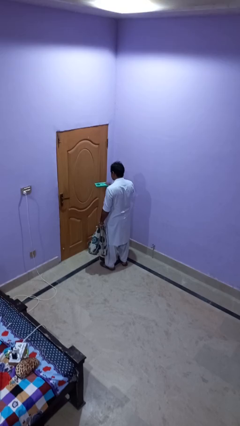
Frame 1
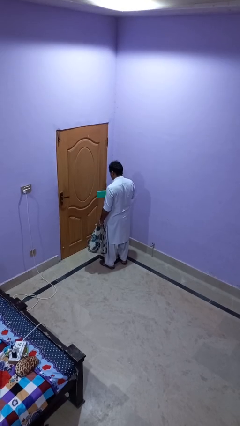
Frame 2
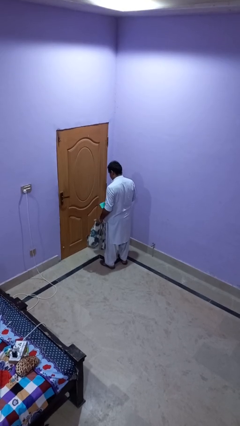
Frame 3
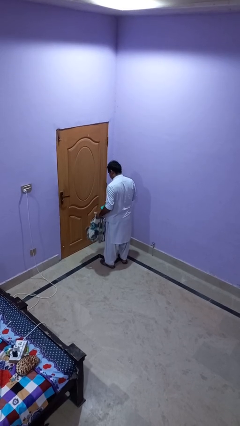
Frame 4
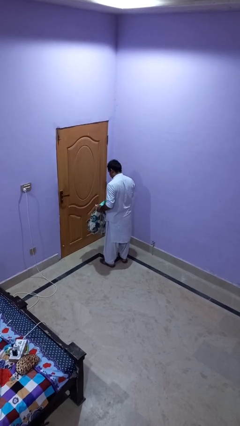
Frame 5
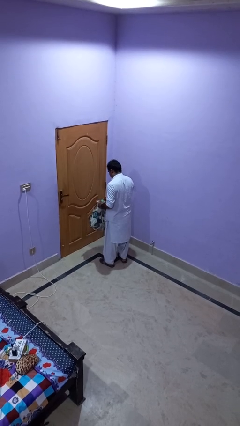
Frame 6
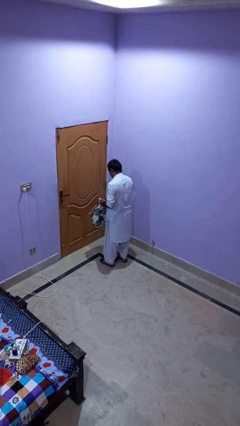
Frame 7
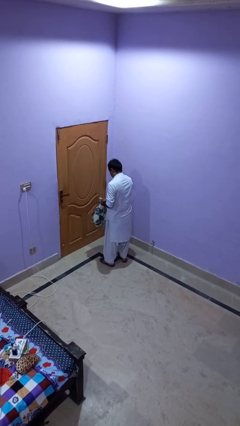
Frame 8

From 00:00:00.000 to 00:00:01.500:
person puts object into backpack

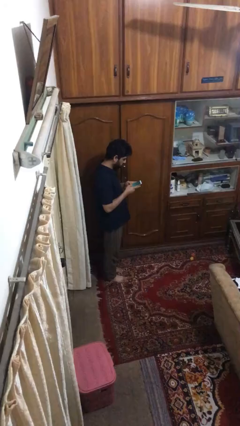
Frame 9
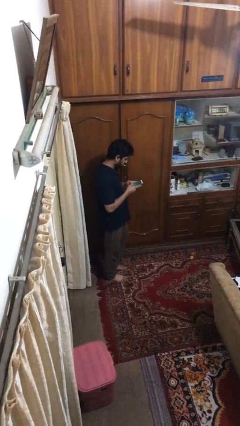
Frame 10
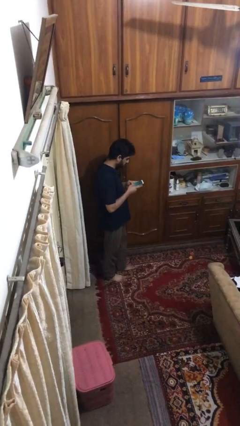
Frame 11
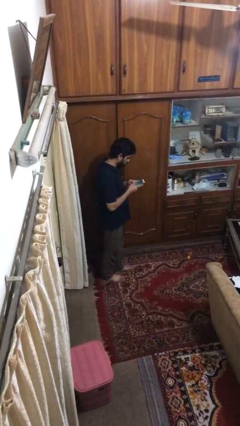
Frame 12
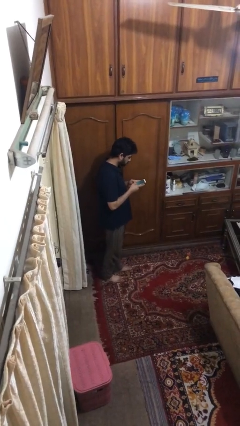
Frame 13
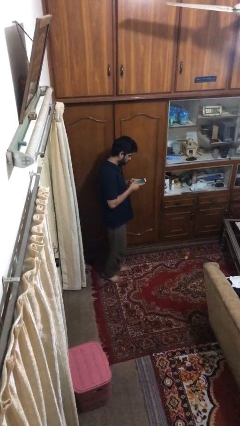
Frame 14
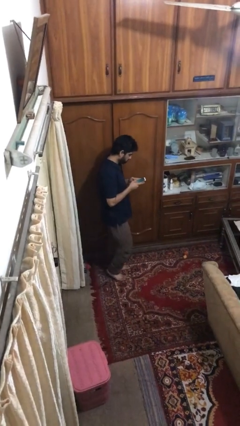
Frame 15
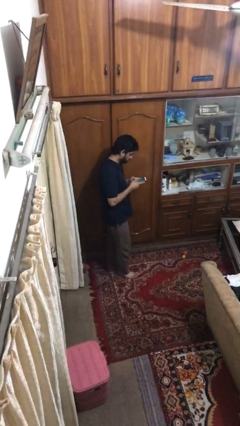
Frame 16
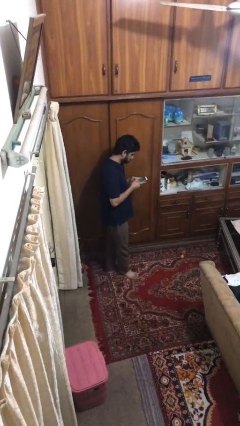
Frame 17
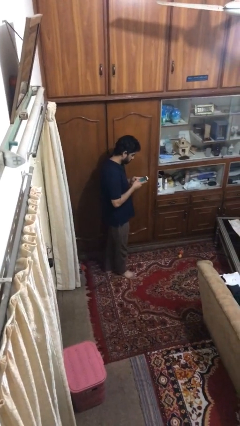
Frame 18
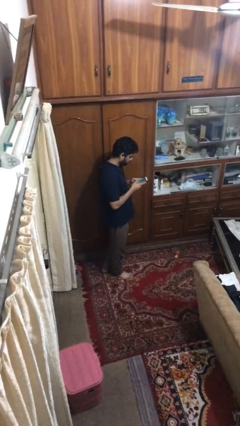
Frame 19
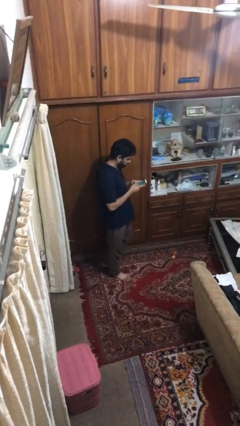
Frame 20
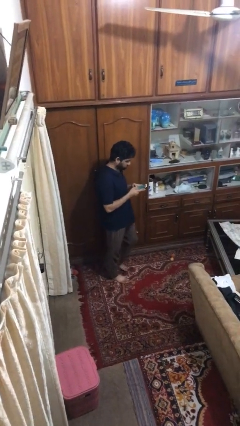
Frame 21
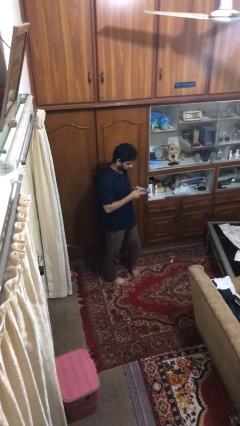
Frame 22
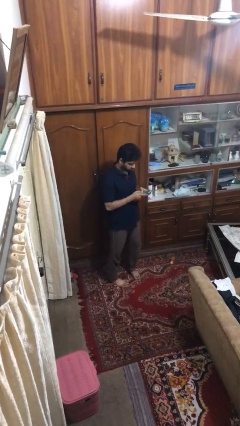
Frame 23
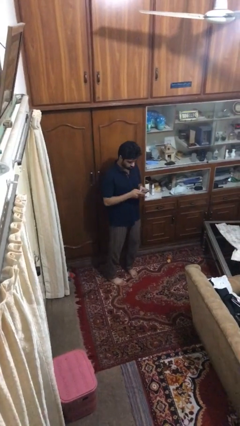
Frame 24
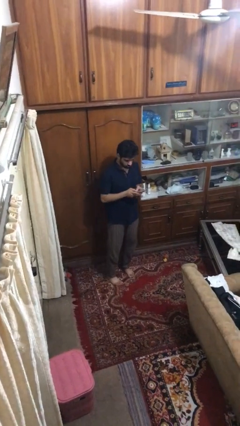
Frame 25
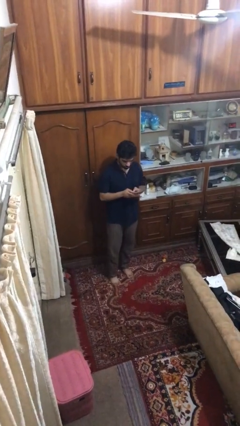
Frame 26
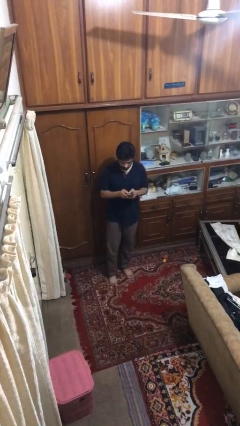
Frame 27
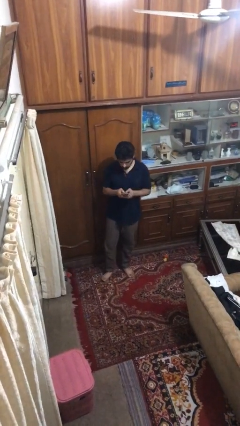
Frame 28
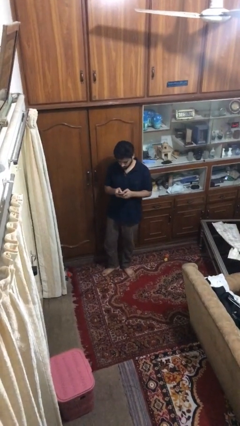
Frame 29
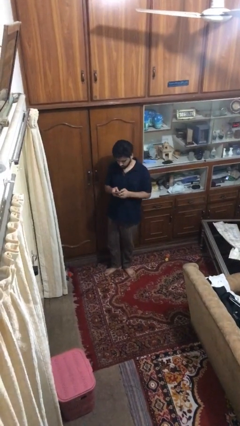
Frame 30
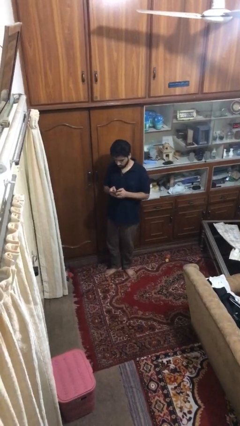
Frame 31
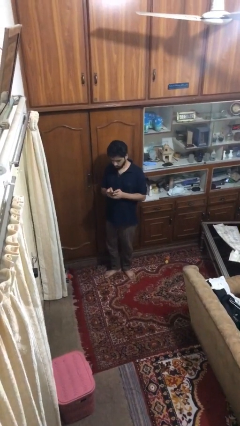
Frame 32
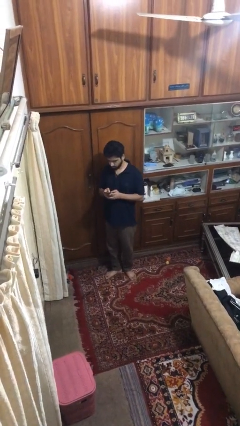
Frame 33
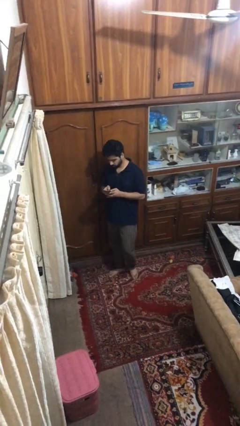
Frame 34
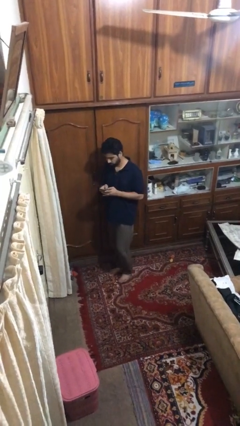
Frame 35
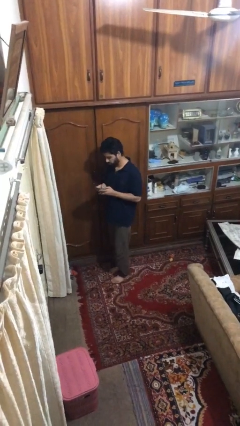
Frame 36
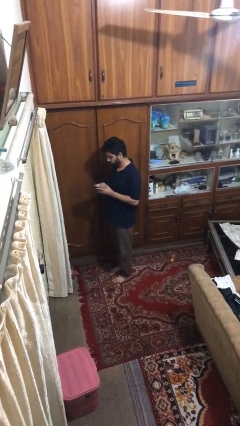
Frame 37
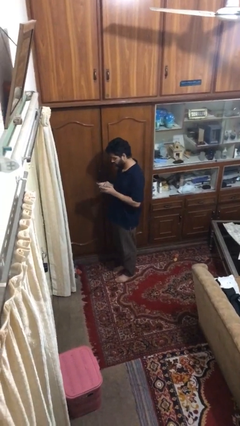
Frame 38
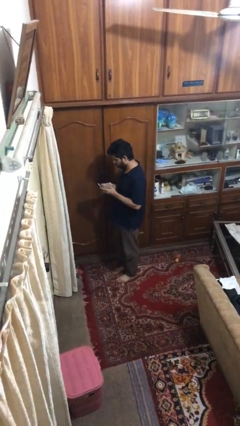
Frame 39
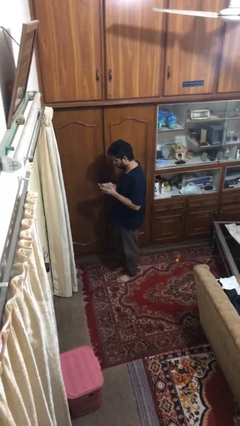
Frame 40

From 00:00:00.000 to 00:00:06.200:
person texts on phone

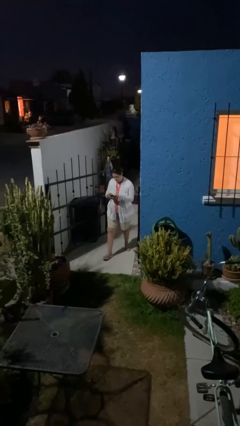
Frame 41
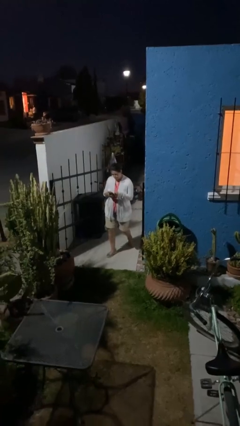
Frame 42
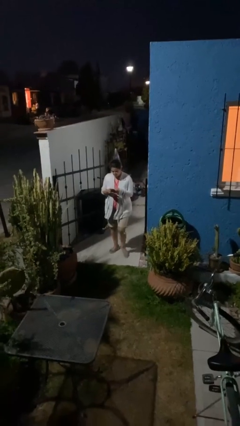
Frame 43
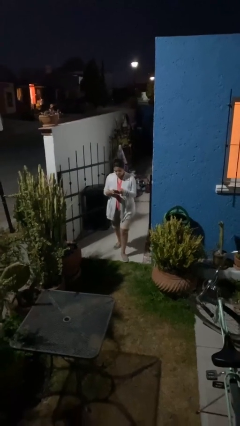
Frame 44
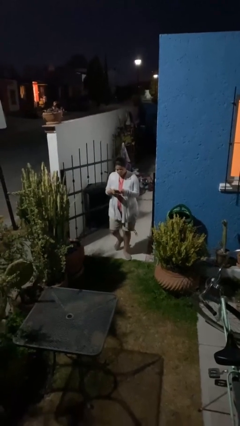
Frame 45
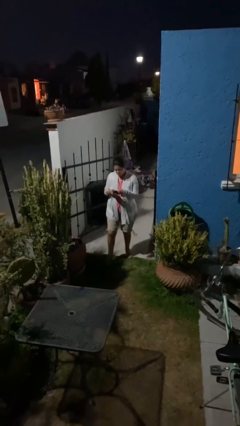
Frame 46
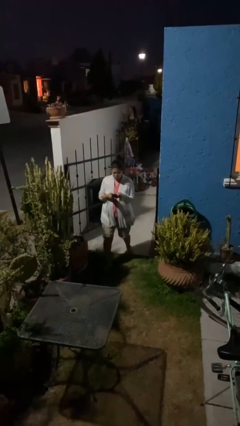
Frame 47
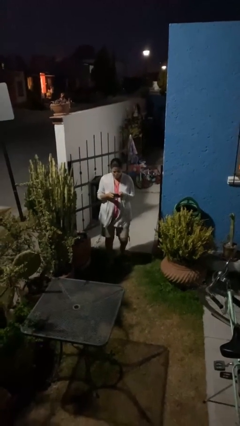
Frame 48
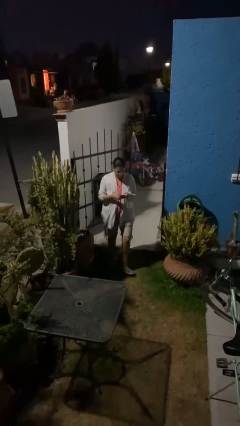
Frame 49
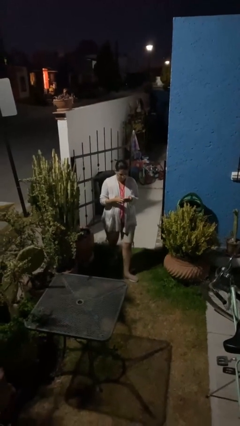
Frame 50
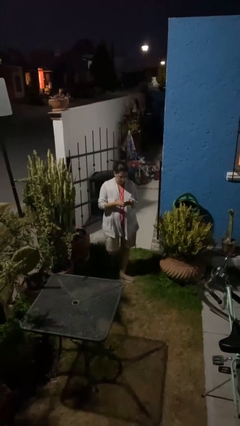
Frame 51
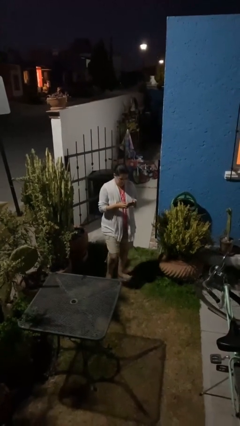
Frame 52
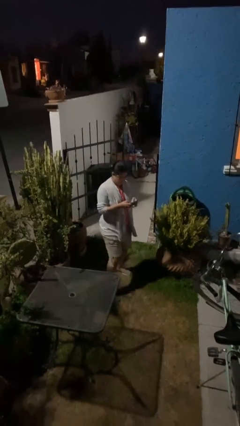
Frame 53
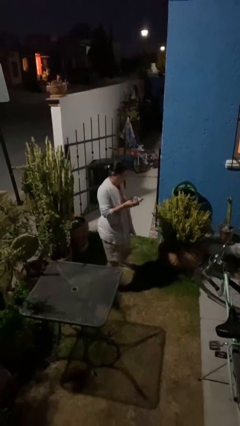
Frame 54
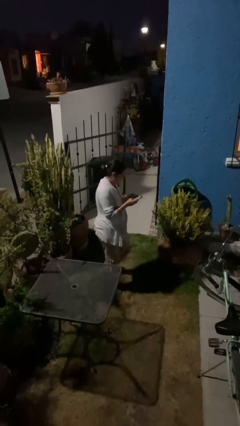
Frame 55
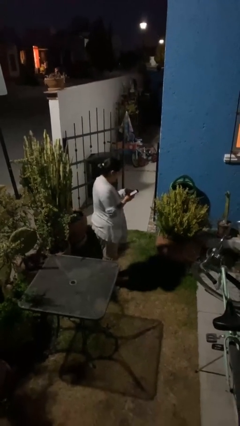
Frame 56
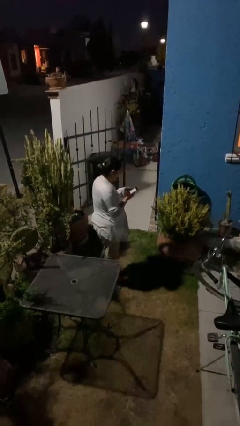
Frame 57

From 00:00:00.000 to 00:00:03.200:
person enters scene through structure

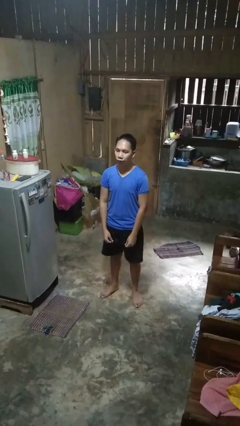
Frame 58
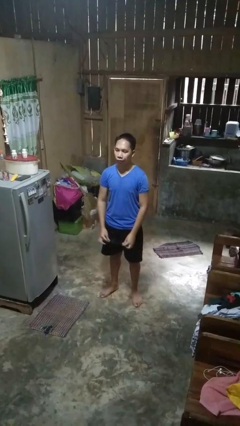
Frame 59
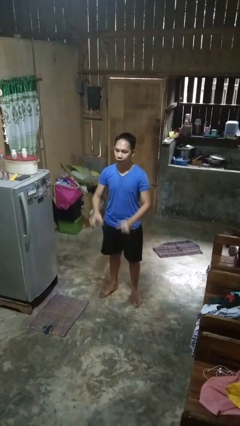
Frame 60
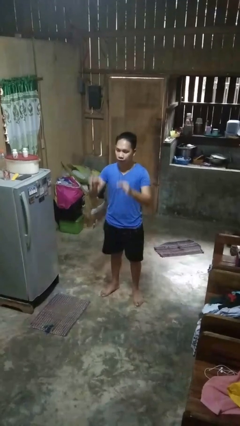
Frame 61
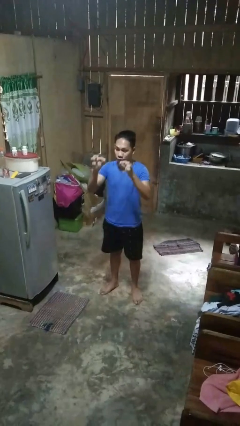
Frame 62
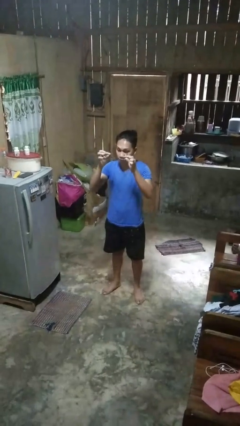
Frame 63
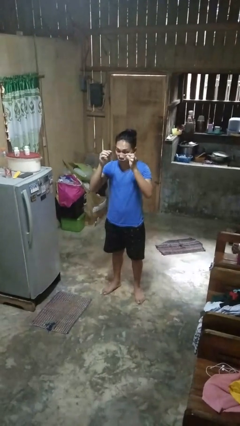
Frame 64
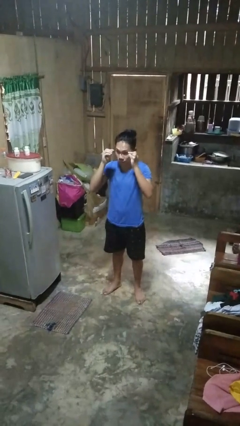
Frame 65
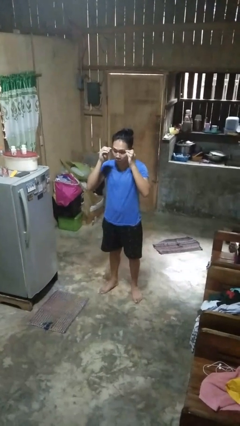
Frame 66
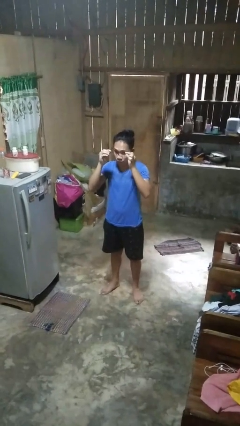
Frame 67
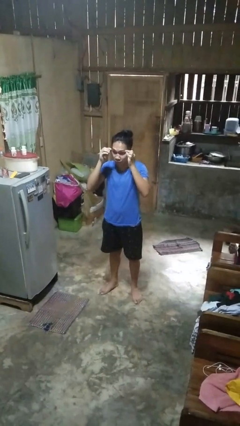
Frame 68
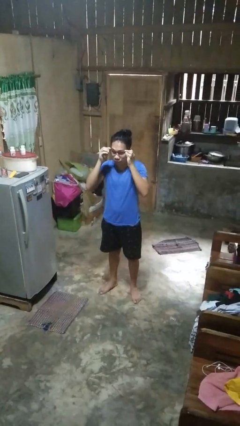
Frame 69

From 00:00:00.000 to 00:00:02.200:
person puts on glasses

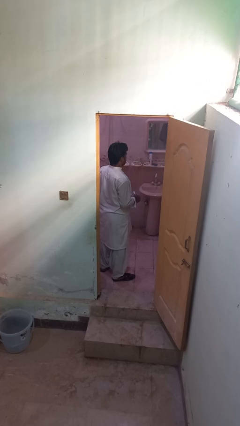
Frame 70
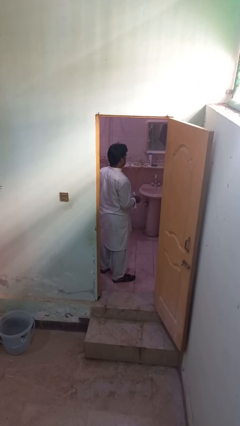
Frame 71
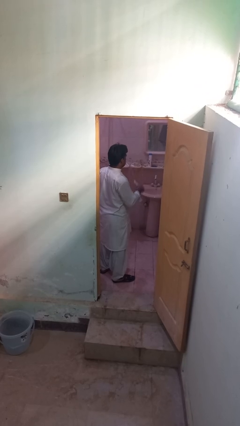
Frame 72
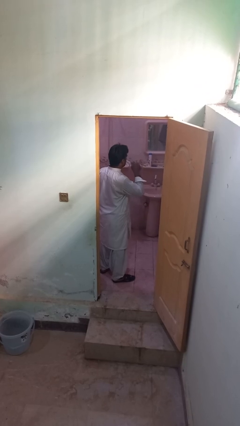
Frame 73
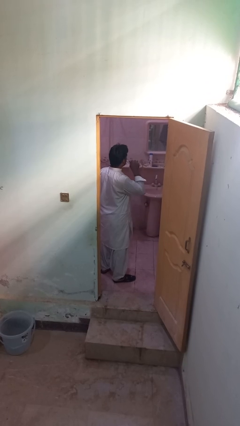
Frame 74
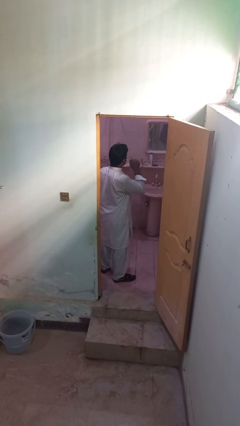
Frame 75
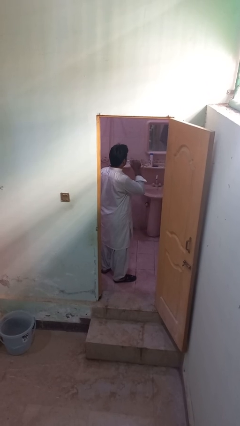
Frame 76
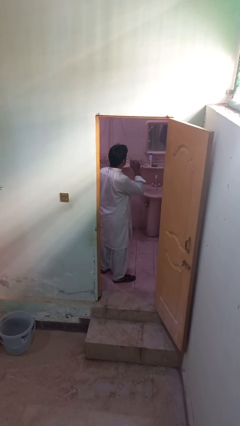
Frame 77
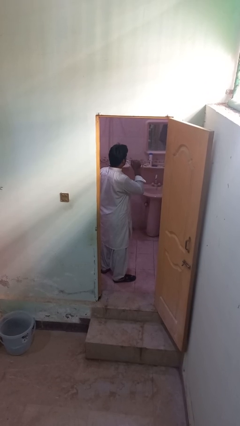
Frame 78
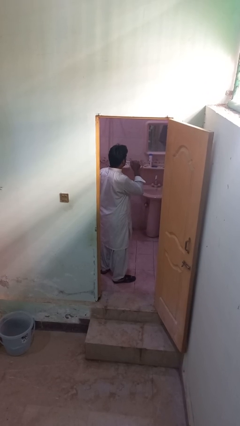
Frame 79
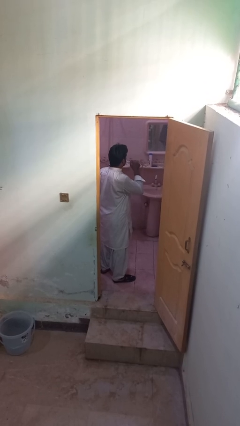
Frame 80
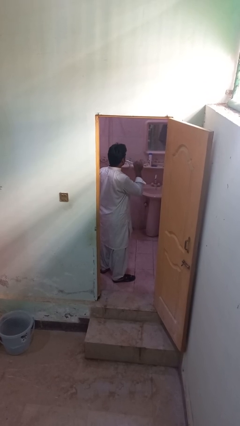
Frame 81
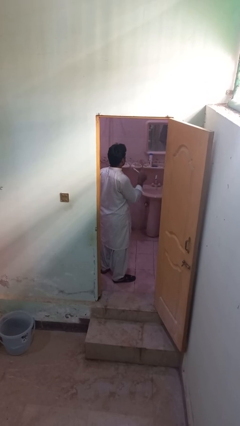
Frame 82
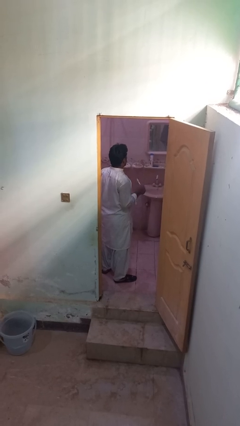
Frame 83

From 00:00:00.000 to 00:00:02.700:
person brushes teeth

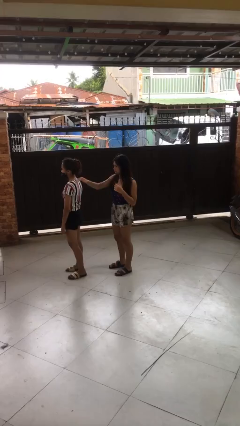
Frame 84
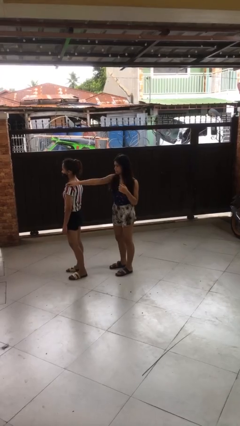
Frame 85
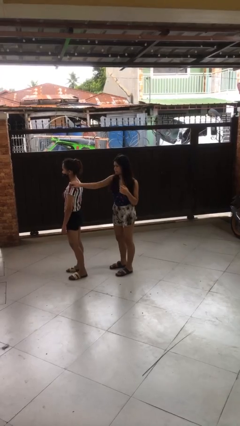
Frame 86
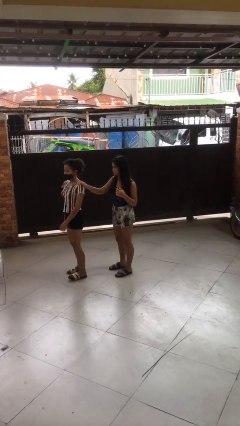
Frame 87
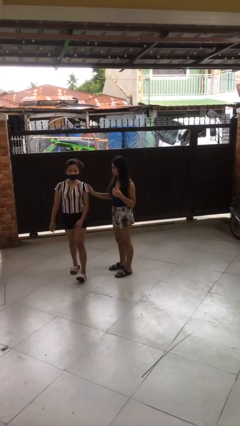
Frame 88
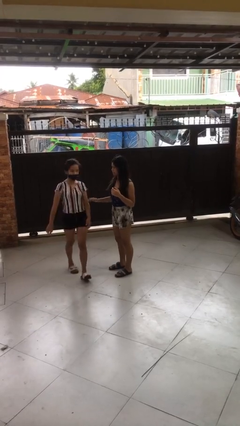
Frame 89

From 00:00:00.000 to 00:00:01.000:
person grabs person by shoulder

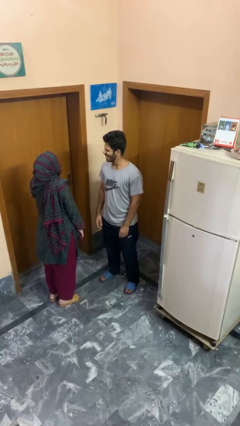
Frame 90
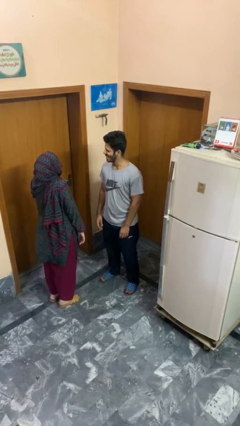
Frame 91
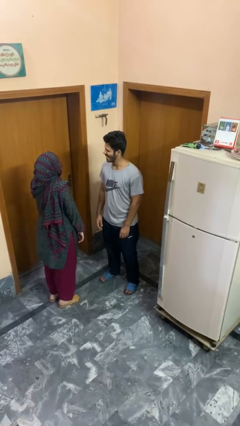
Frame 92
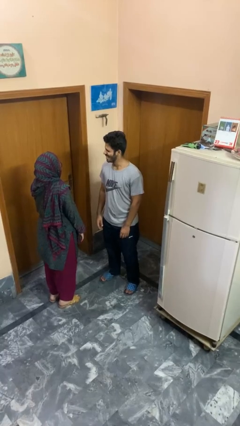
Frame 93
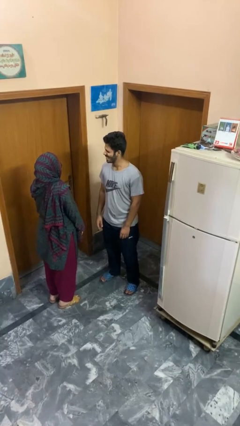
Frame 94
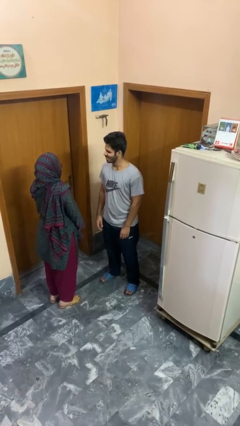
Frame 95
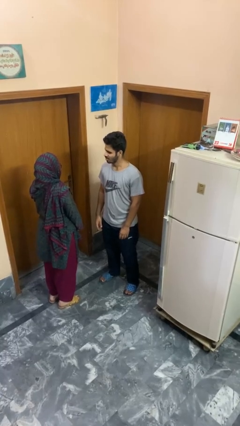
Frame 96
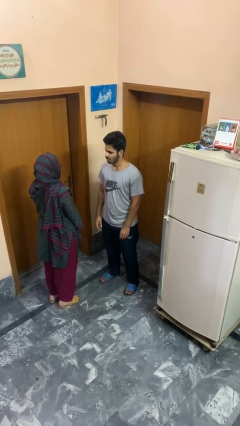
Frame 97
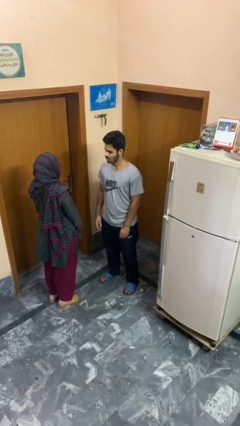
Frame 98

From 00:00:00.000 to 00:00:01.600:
person laughs with person
